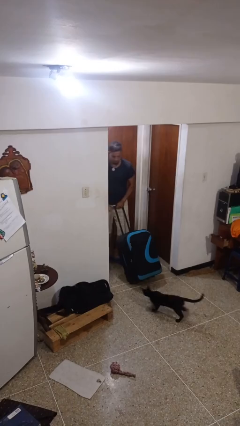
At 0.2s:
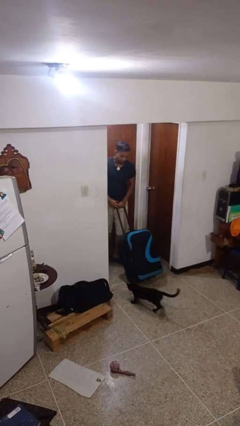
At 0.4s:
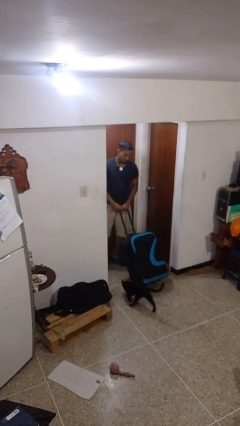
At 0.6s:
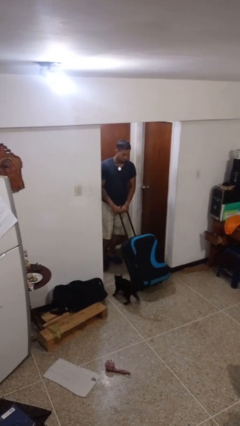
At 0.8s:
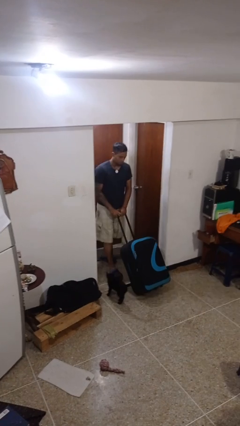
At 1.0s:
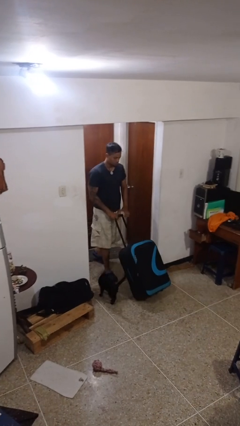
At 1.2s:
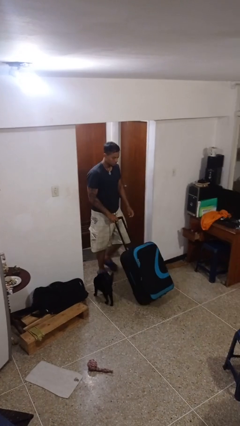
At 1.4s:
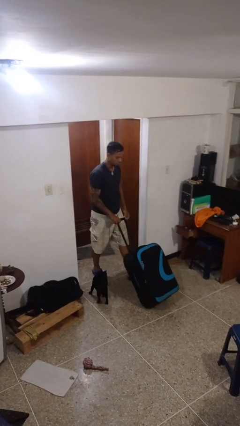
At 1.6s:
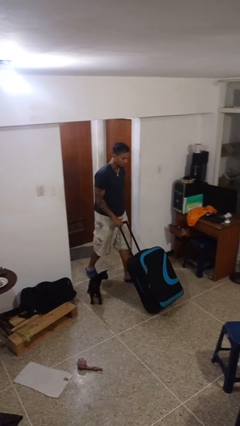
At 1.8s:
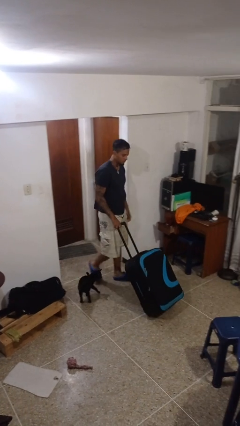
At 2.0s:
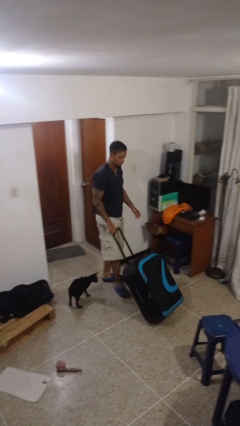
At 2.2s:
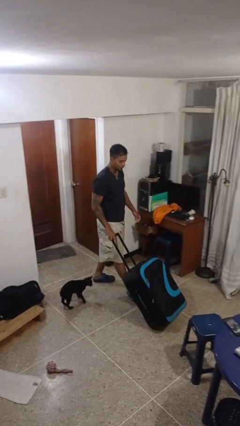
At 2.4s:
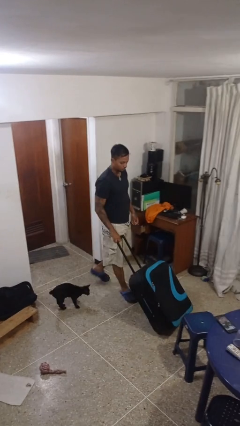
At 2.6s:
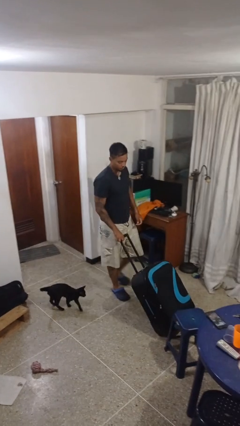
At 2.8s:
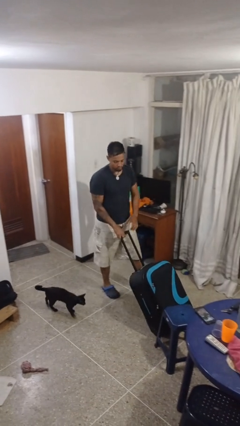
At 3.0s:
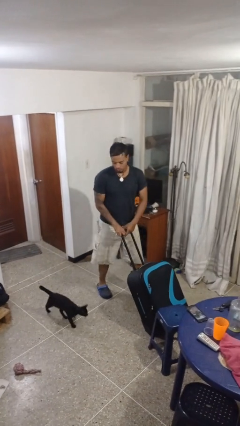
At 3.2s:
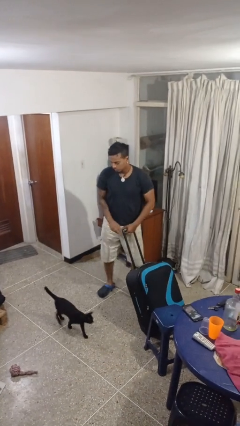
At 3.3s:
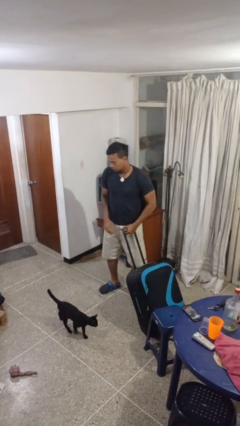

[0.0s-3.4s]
person pushes wheeled cart

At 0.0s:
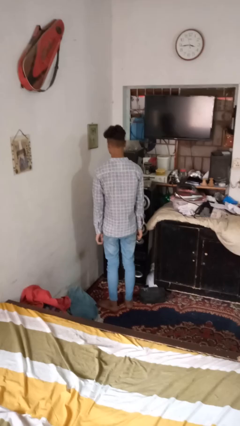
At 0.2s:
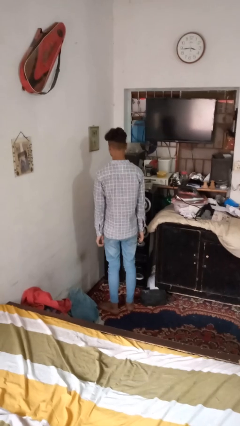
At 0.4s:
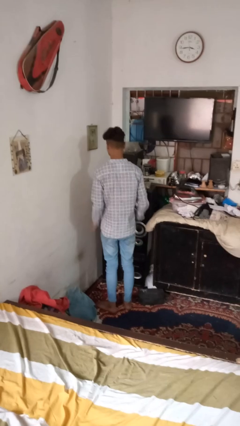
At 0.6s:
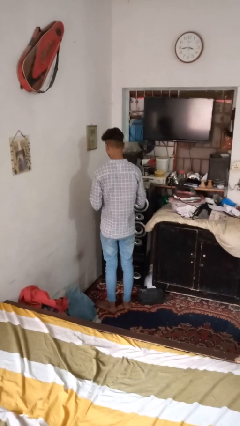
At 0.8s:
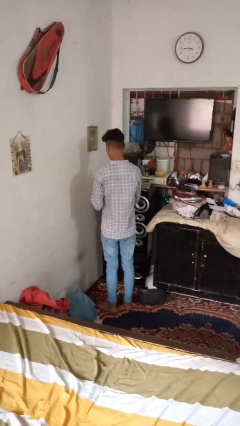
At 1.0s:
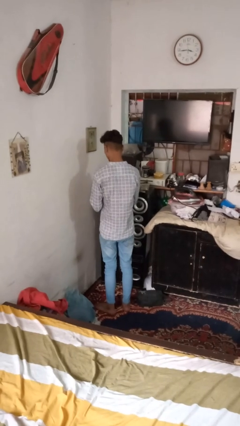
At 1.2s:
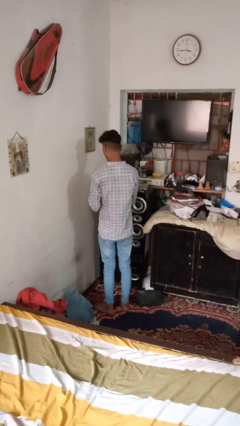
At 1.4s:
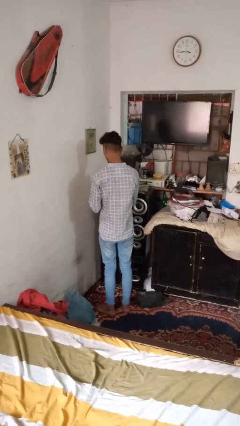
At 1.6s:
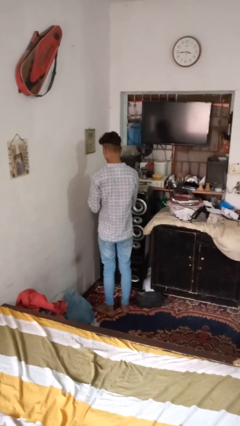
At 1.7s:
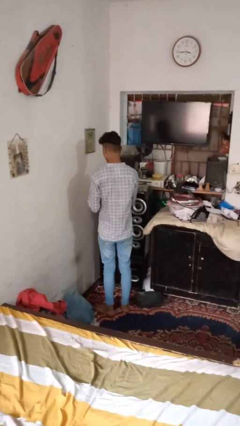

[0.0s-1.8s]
person clips fingernails

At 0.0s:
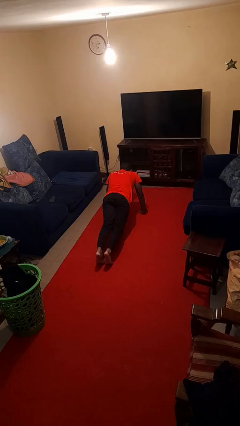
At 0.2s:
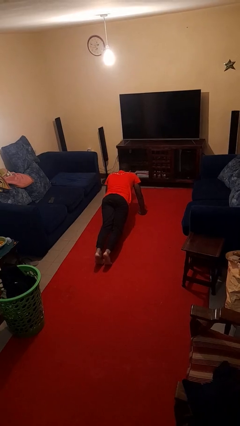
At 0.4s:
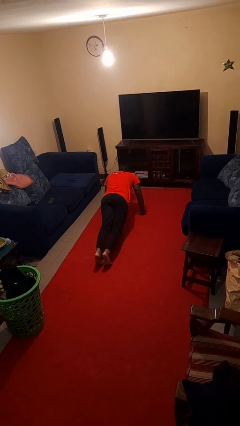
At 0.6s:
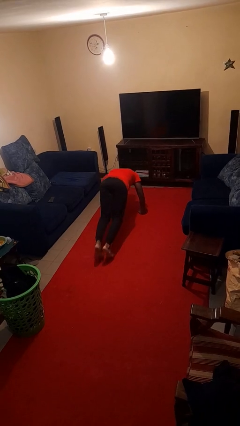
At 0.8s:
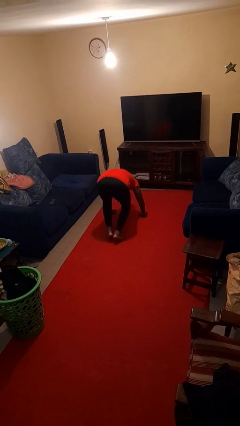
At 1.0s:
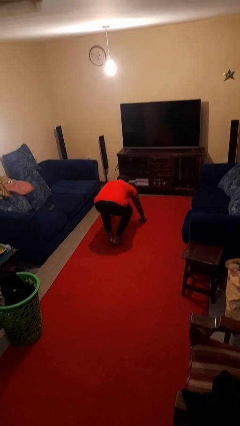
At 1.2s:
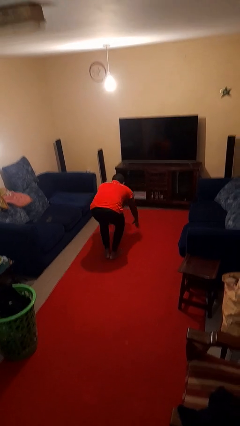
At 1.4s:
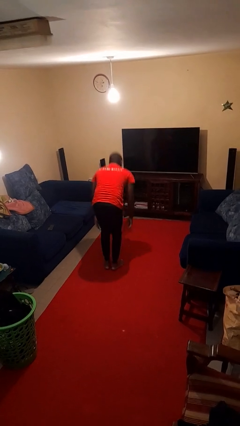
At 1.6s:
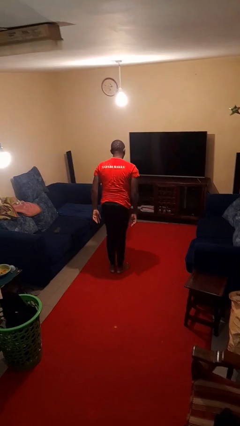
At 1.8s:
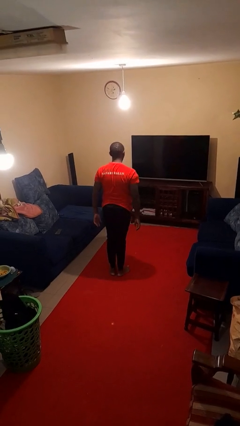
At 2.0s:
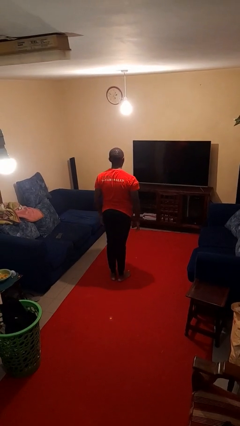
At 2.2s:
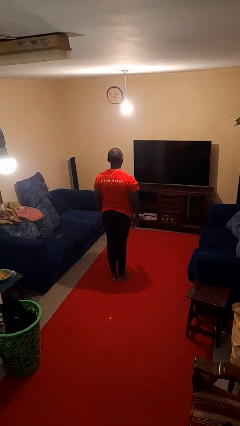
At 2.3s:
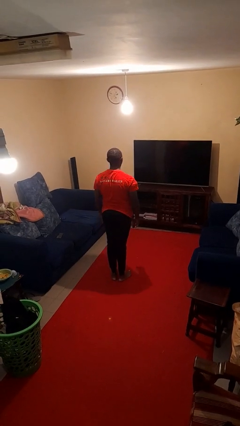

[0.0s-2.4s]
person stands up from floor

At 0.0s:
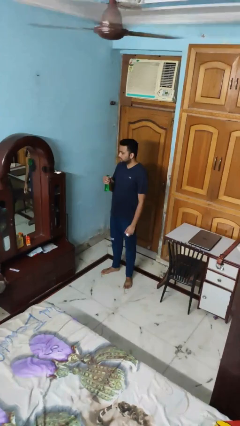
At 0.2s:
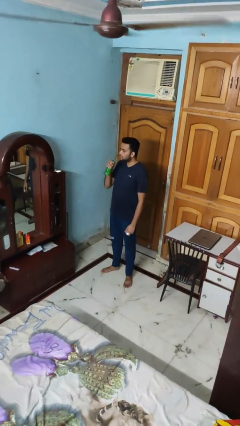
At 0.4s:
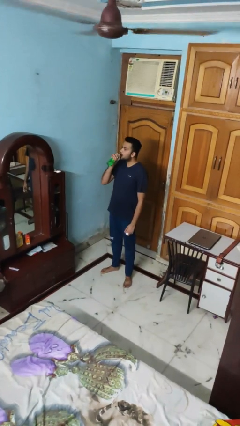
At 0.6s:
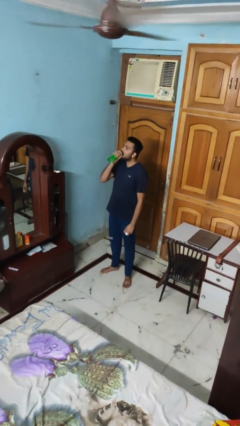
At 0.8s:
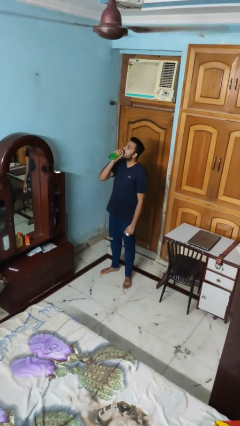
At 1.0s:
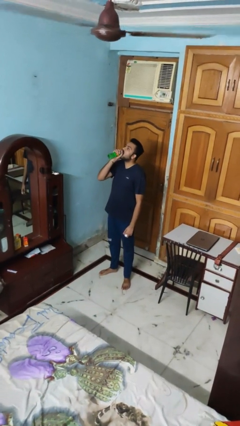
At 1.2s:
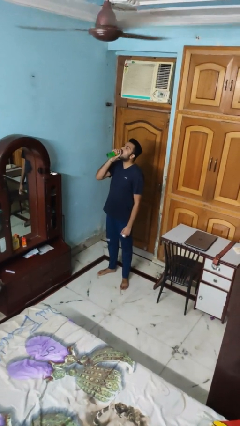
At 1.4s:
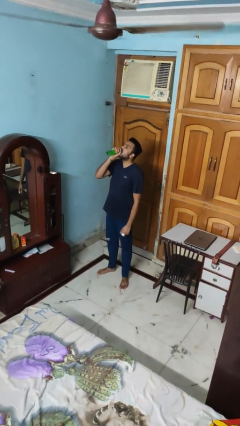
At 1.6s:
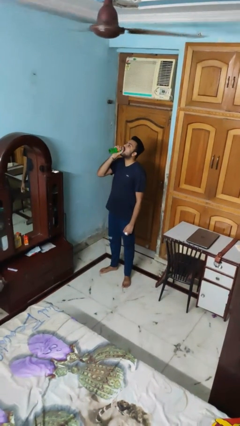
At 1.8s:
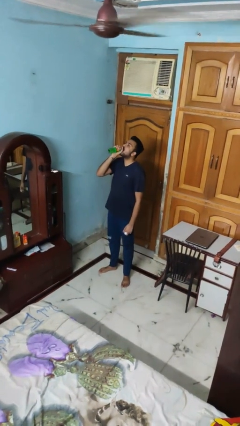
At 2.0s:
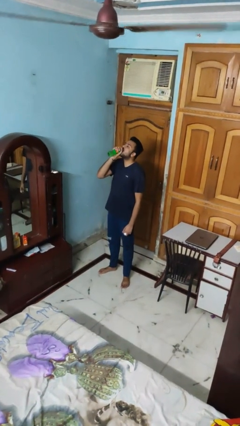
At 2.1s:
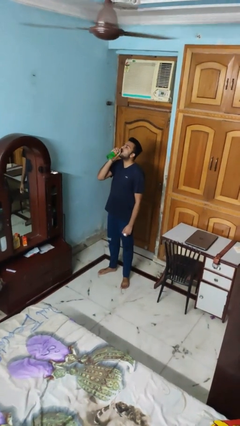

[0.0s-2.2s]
person drinks from bottle

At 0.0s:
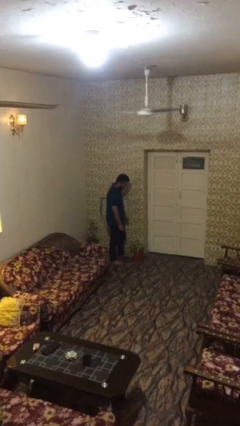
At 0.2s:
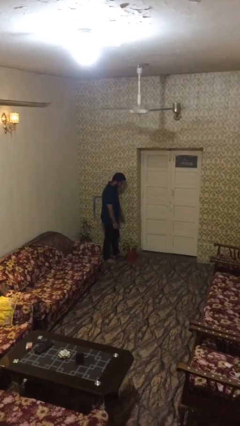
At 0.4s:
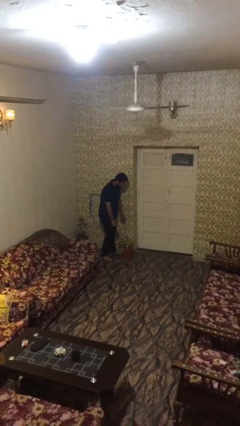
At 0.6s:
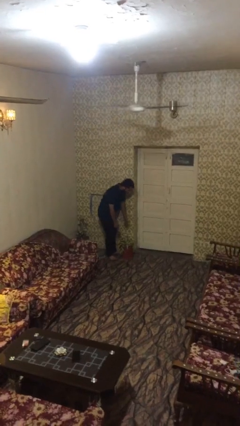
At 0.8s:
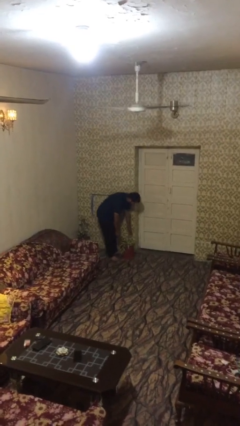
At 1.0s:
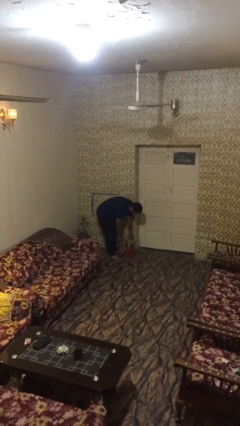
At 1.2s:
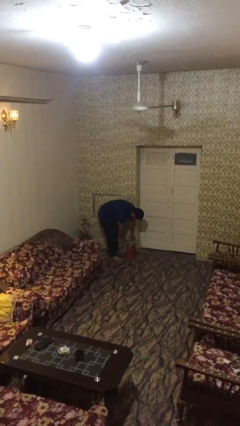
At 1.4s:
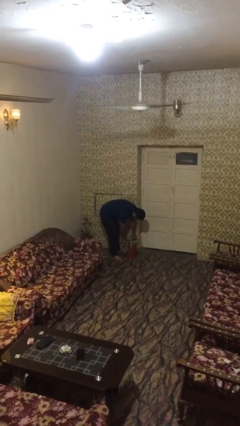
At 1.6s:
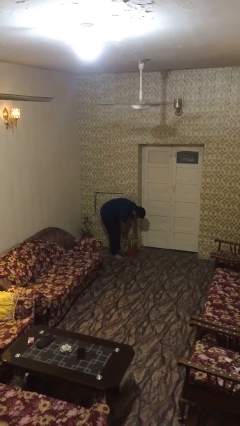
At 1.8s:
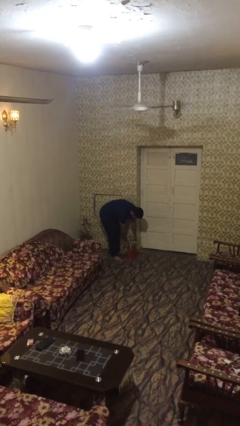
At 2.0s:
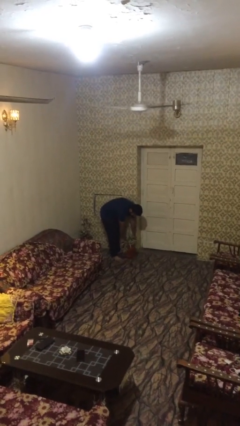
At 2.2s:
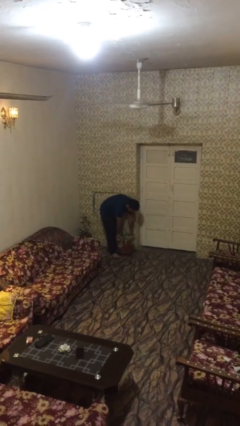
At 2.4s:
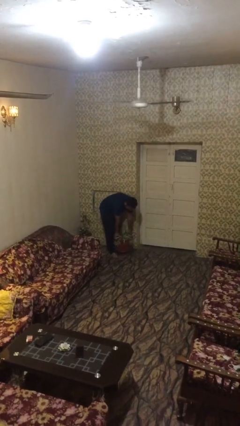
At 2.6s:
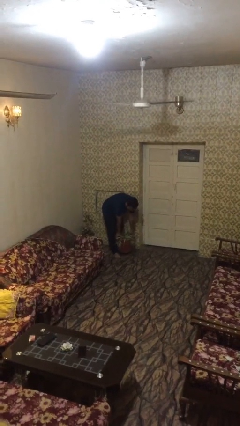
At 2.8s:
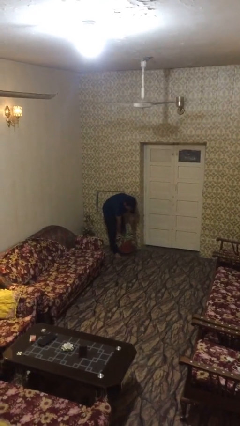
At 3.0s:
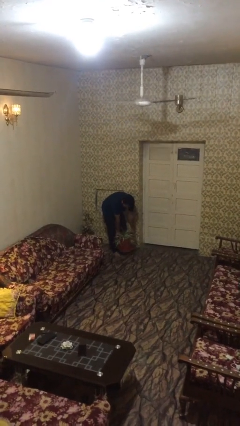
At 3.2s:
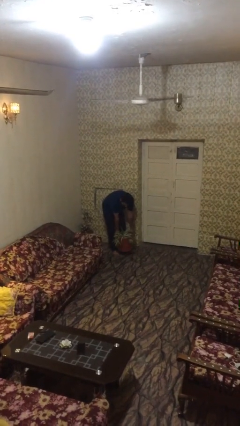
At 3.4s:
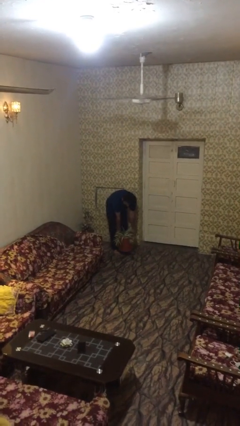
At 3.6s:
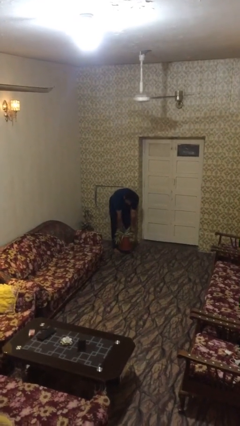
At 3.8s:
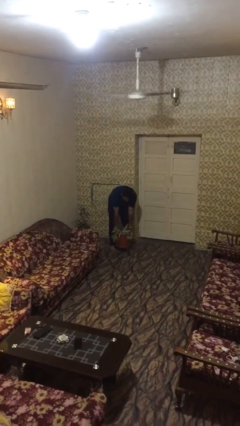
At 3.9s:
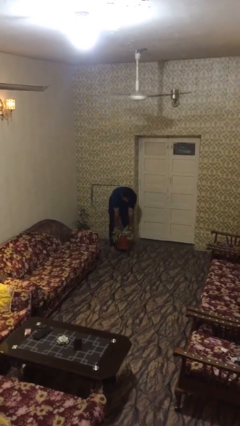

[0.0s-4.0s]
person picks up object from floor

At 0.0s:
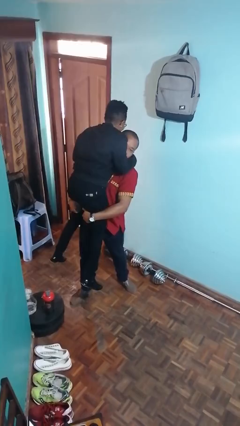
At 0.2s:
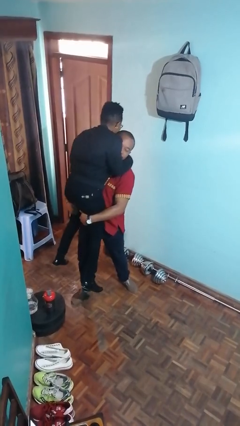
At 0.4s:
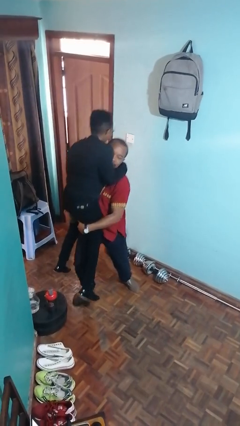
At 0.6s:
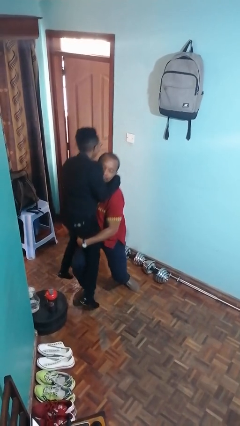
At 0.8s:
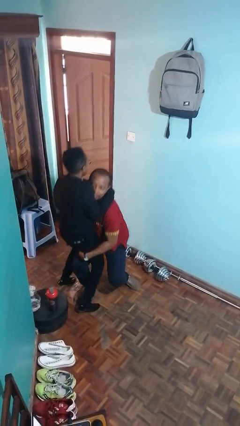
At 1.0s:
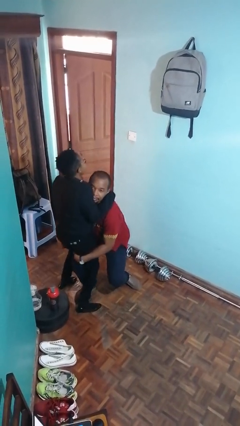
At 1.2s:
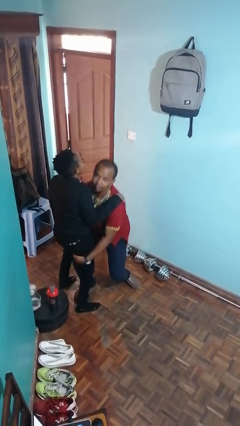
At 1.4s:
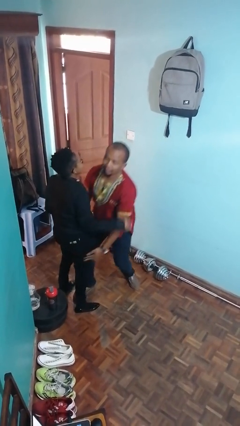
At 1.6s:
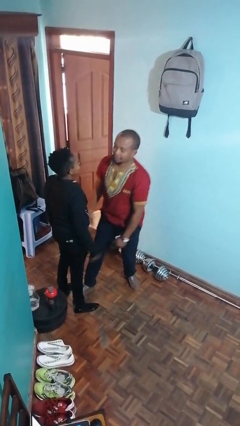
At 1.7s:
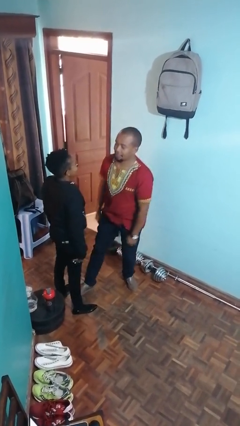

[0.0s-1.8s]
person puts down person

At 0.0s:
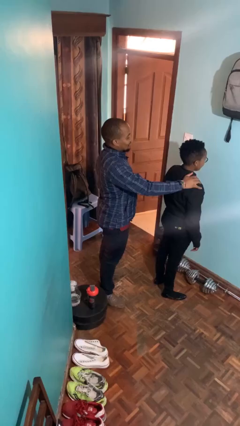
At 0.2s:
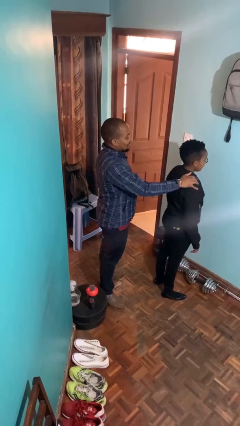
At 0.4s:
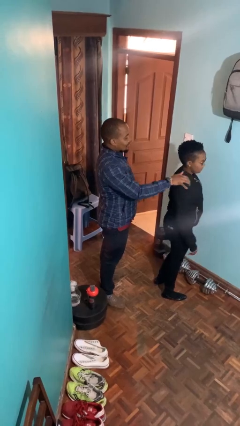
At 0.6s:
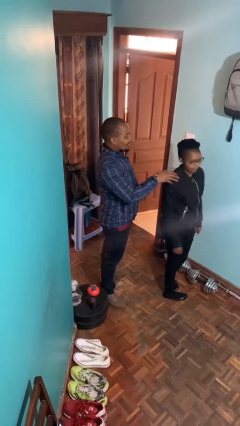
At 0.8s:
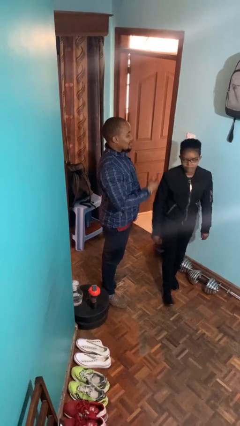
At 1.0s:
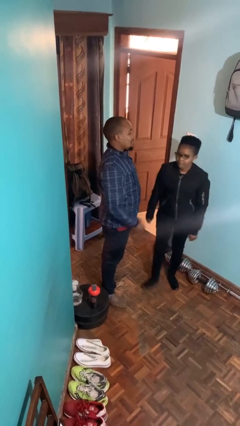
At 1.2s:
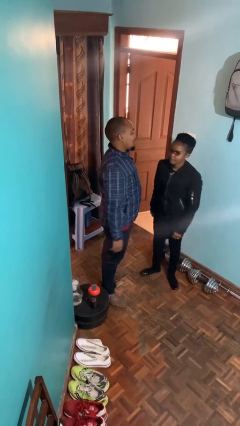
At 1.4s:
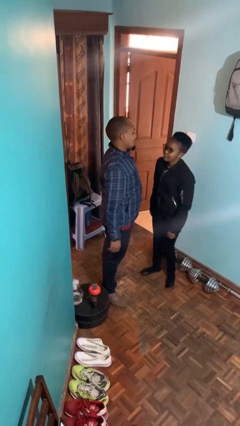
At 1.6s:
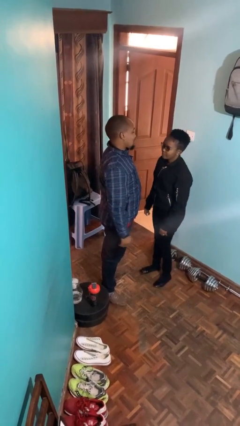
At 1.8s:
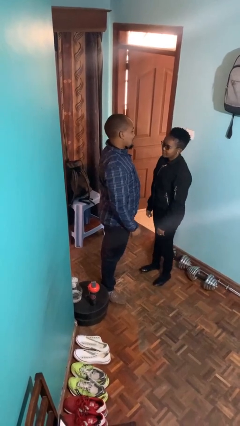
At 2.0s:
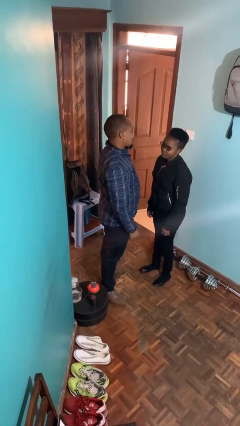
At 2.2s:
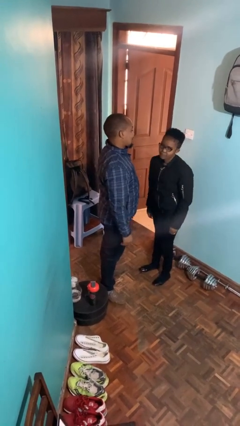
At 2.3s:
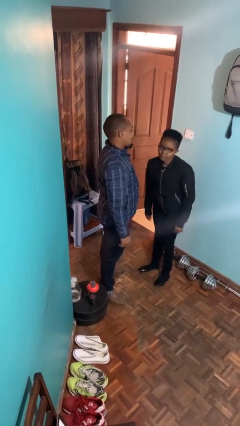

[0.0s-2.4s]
person spins person around
